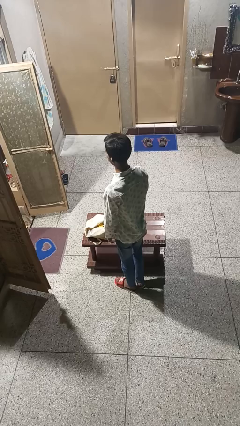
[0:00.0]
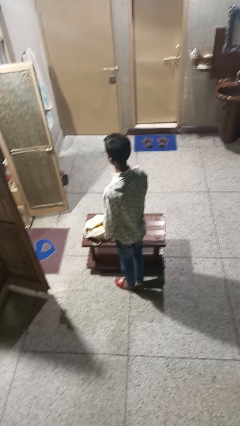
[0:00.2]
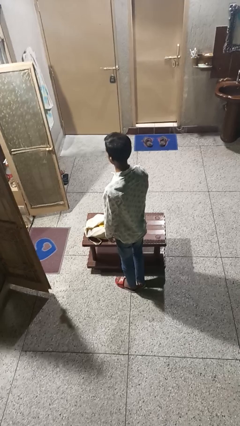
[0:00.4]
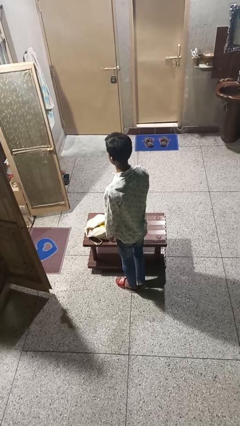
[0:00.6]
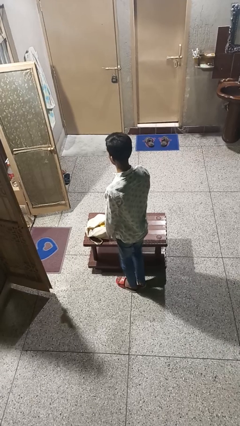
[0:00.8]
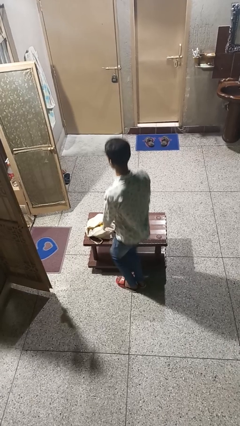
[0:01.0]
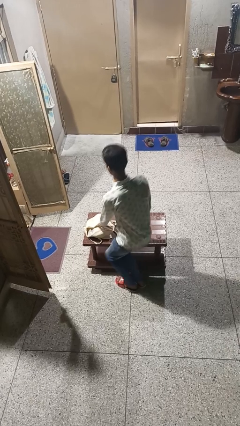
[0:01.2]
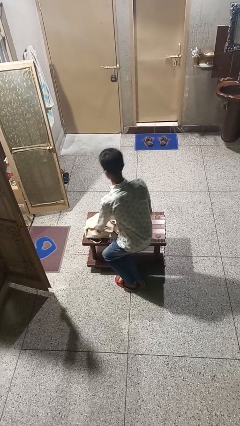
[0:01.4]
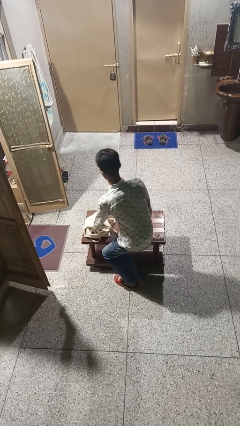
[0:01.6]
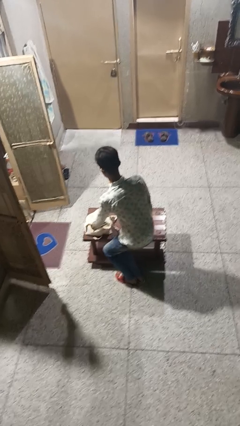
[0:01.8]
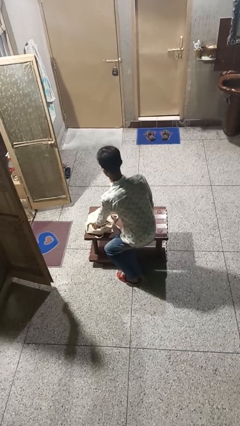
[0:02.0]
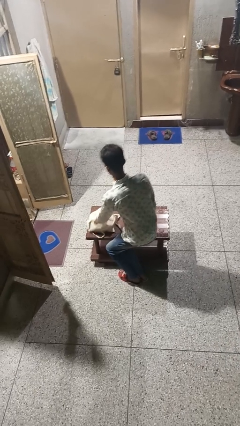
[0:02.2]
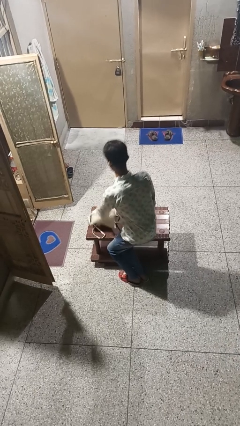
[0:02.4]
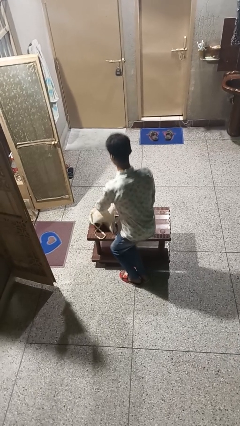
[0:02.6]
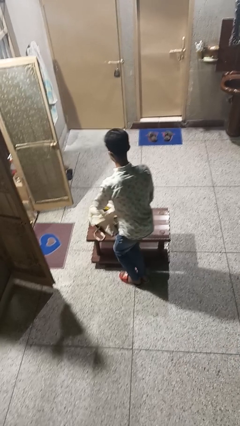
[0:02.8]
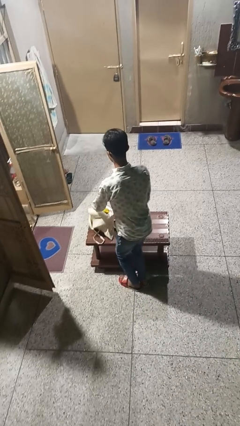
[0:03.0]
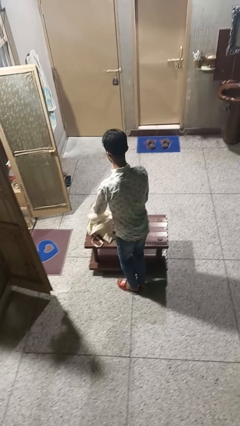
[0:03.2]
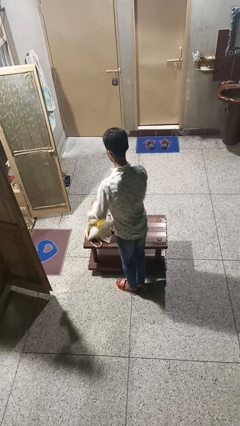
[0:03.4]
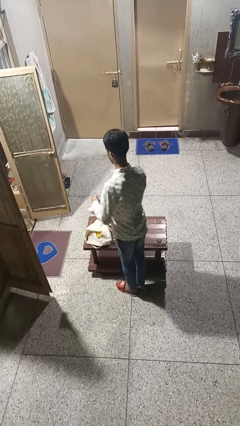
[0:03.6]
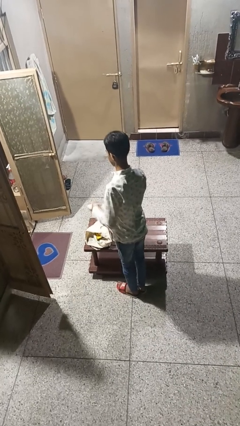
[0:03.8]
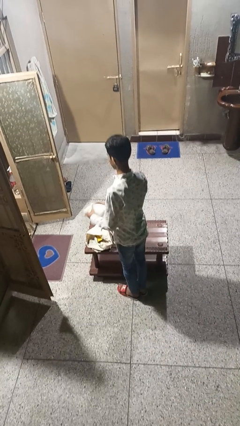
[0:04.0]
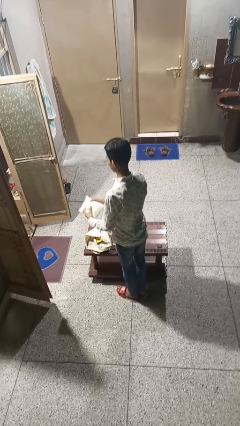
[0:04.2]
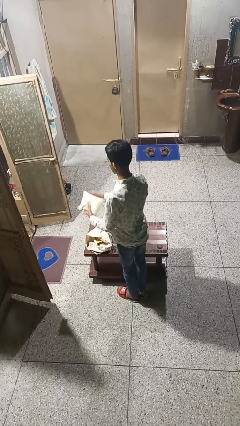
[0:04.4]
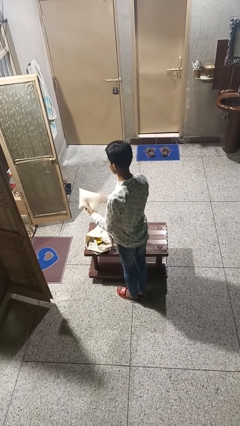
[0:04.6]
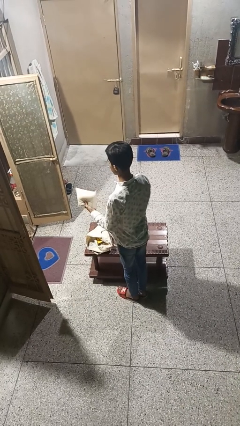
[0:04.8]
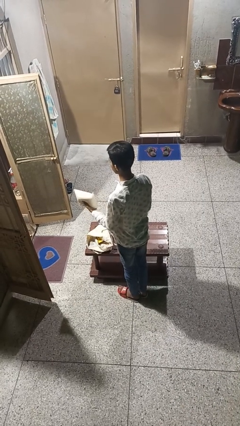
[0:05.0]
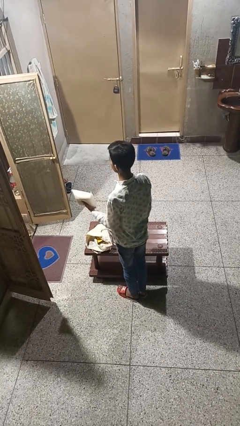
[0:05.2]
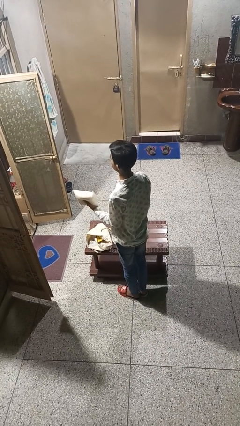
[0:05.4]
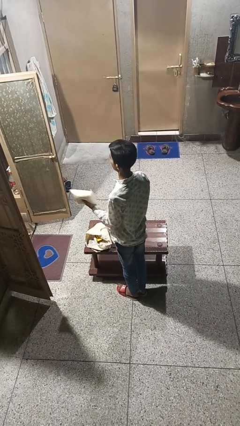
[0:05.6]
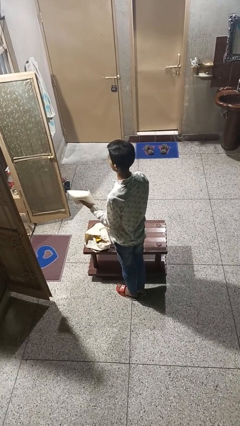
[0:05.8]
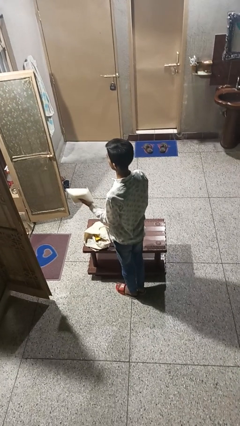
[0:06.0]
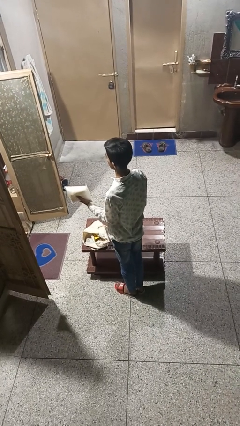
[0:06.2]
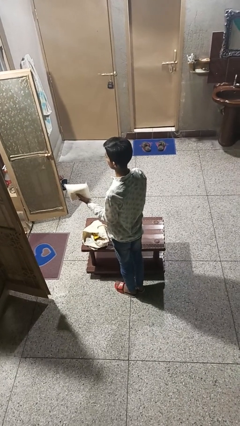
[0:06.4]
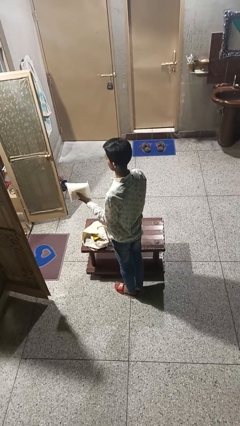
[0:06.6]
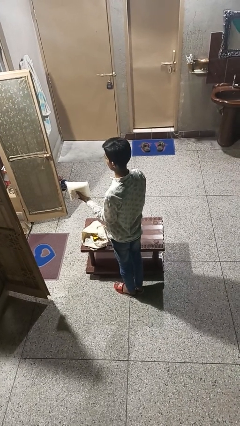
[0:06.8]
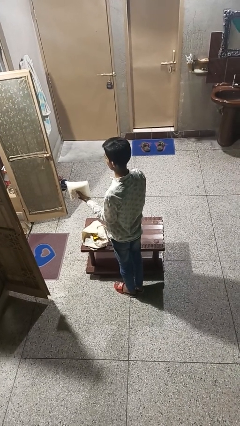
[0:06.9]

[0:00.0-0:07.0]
person takes object from bag

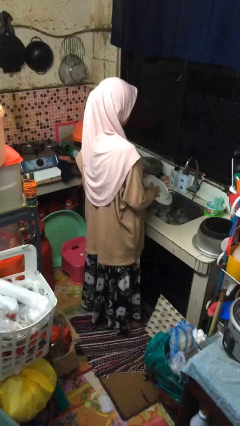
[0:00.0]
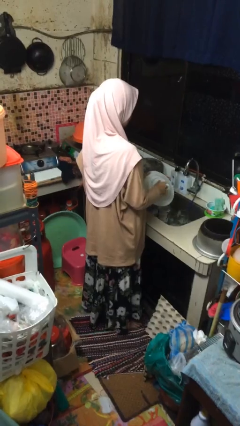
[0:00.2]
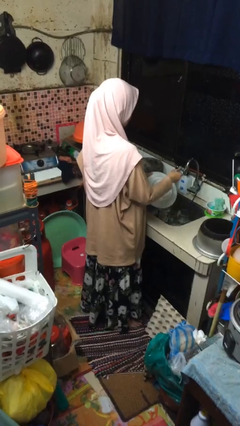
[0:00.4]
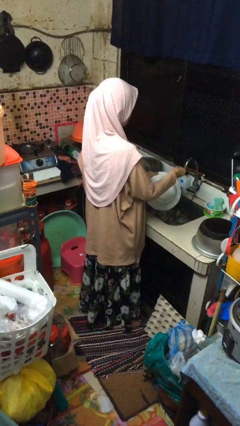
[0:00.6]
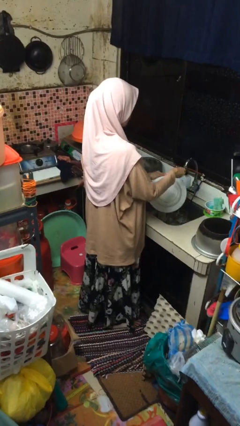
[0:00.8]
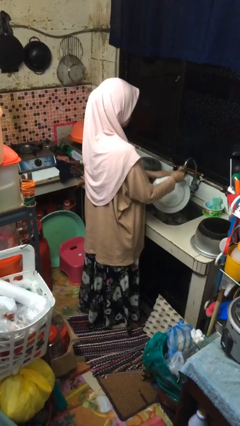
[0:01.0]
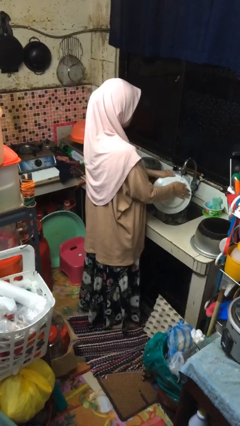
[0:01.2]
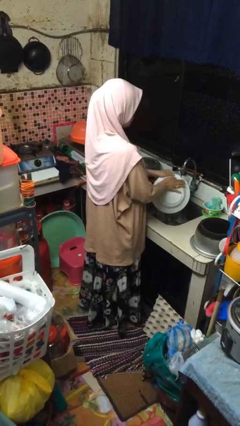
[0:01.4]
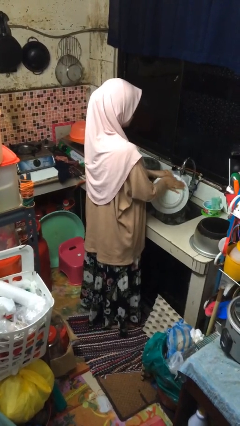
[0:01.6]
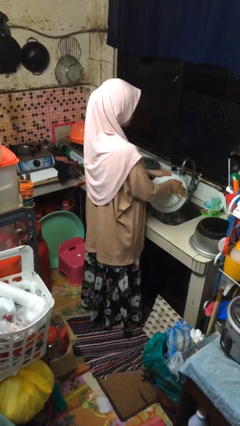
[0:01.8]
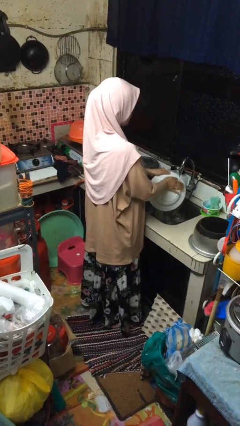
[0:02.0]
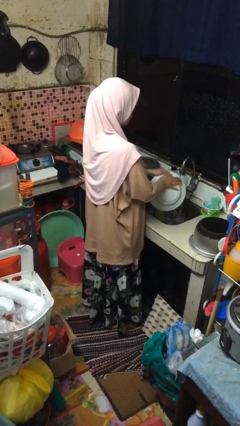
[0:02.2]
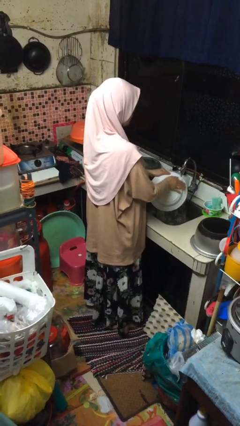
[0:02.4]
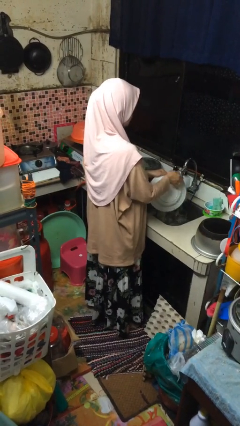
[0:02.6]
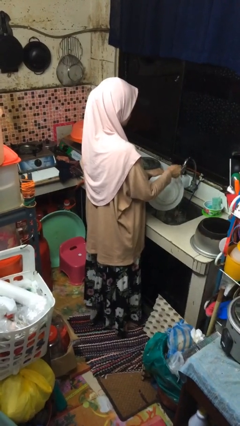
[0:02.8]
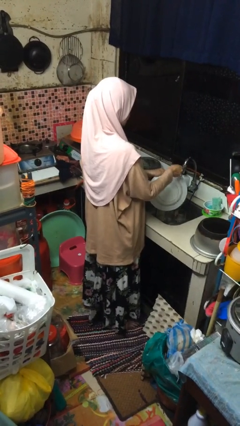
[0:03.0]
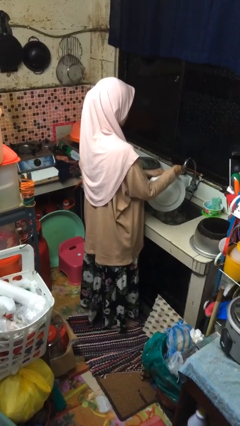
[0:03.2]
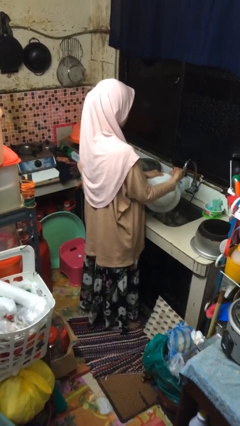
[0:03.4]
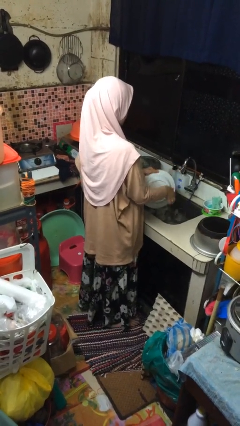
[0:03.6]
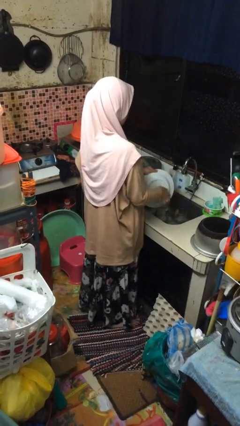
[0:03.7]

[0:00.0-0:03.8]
person washes dish

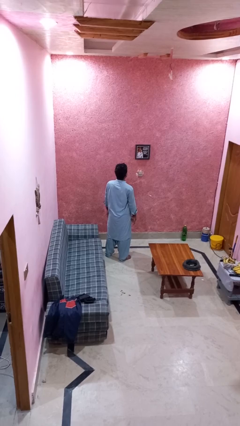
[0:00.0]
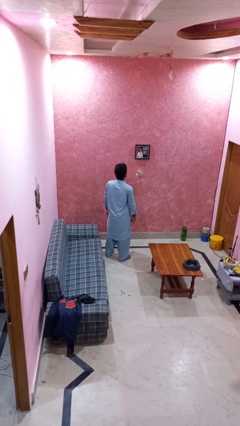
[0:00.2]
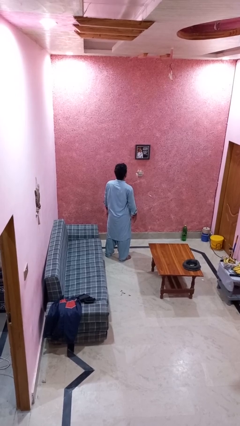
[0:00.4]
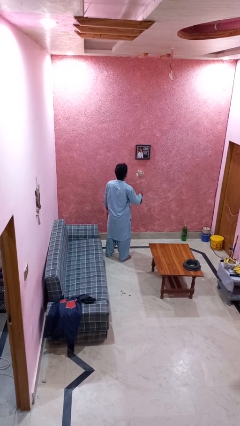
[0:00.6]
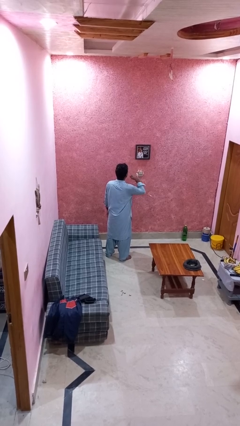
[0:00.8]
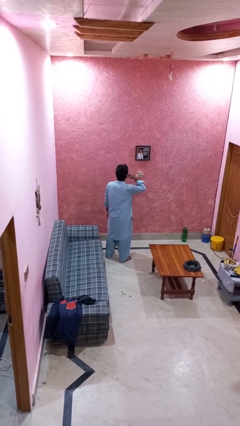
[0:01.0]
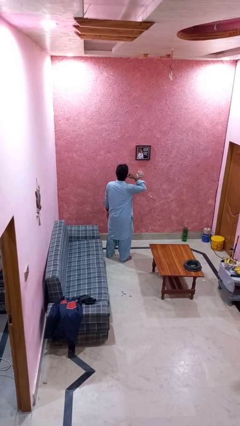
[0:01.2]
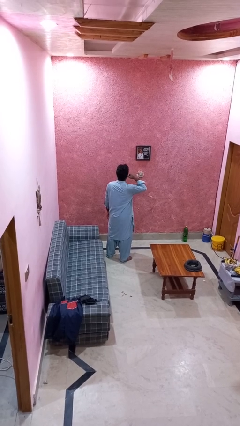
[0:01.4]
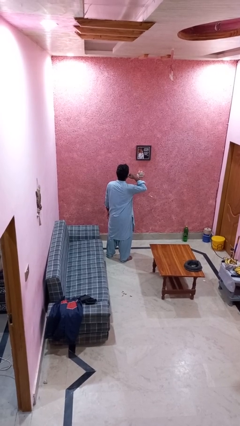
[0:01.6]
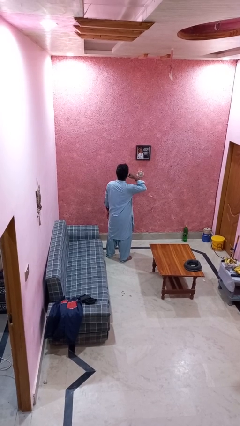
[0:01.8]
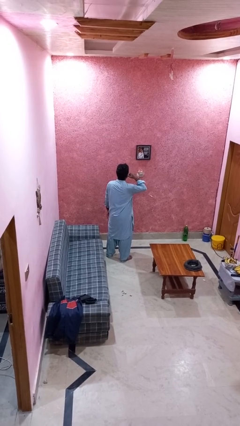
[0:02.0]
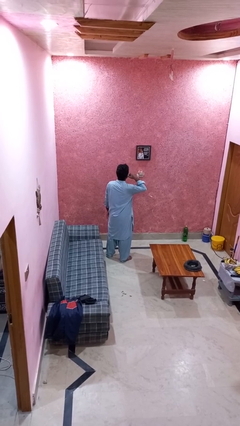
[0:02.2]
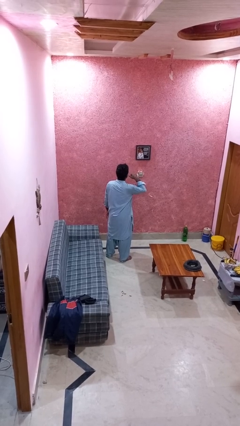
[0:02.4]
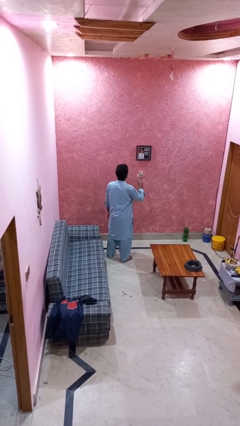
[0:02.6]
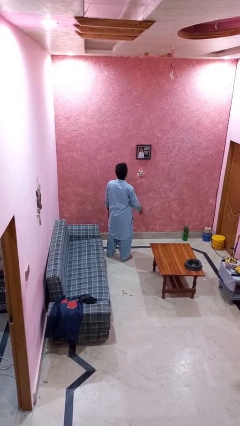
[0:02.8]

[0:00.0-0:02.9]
person gestures call me

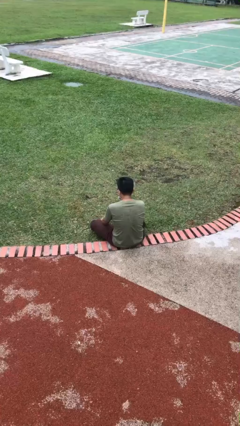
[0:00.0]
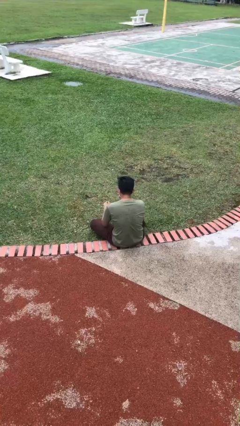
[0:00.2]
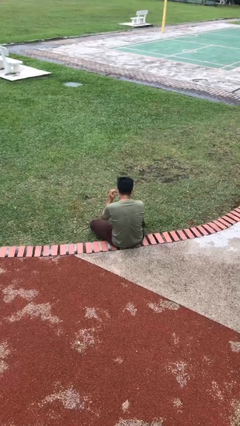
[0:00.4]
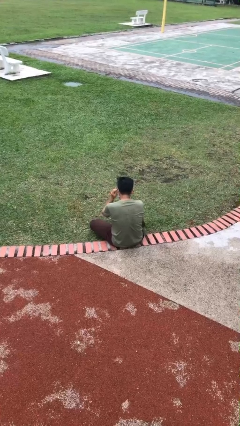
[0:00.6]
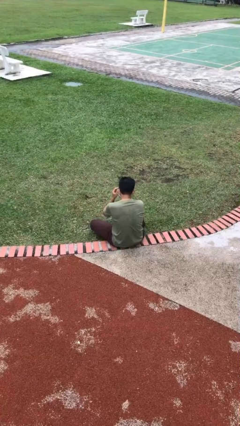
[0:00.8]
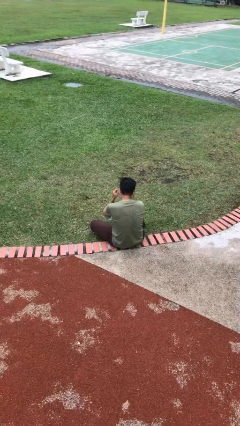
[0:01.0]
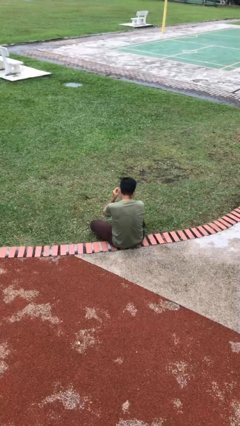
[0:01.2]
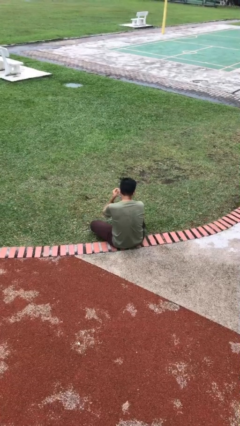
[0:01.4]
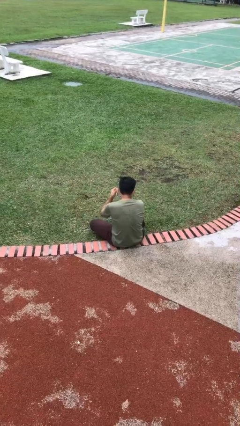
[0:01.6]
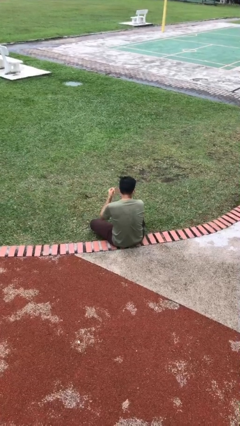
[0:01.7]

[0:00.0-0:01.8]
person touches earlobe

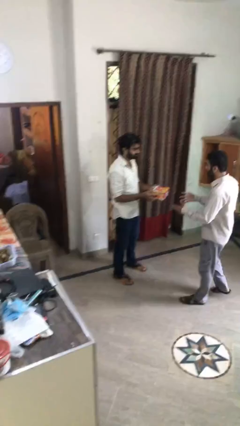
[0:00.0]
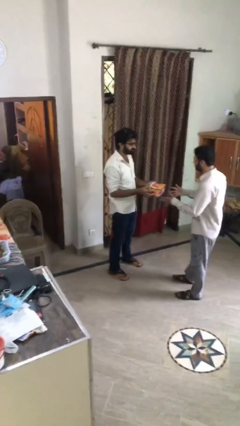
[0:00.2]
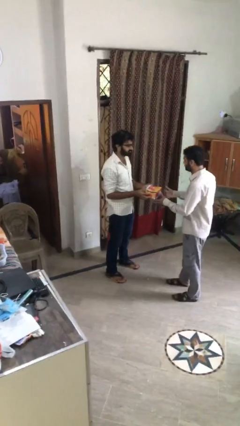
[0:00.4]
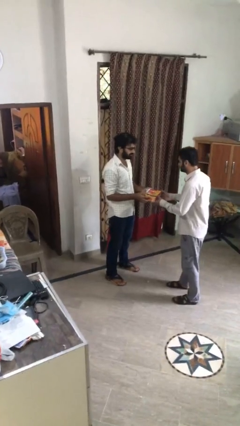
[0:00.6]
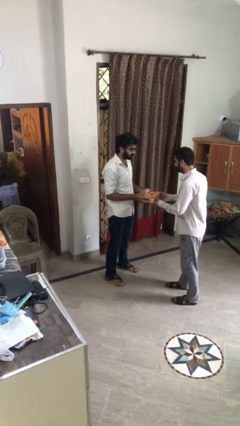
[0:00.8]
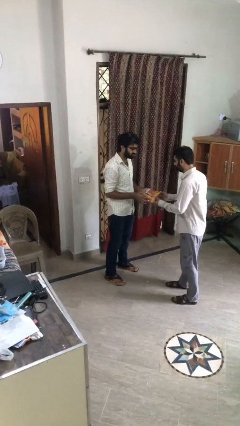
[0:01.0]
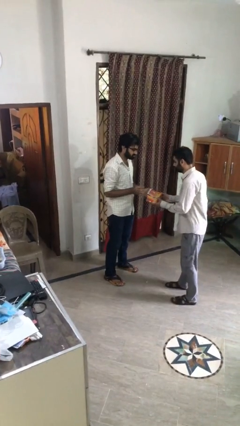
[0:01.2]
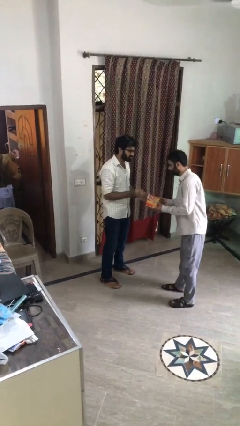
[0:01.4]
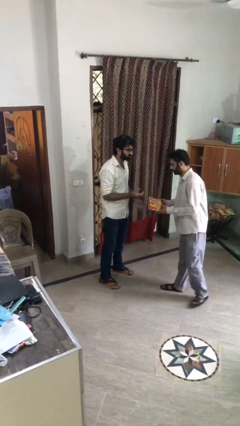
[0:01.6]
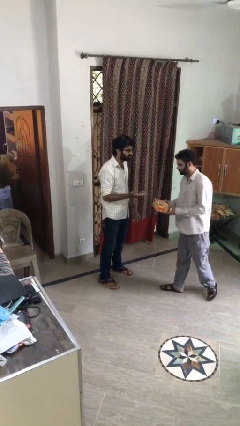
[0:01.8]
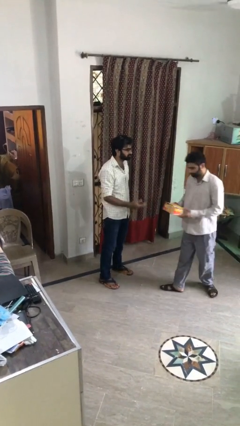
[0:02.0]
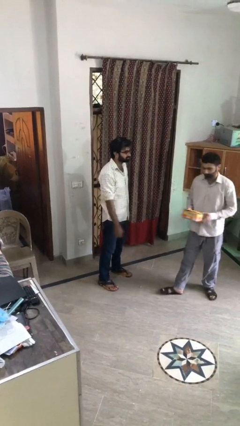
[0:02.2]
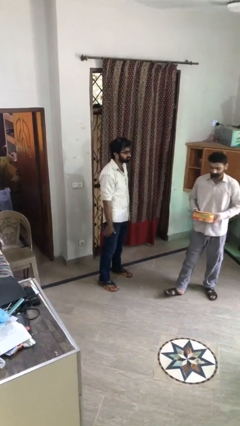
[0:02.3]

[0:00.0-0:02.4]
person transfers object to person
